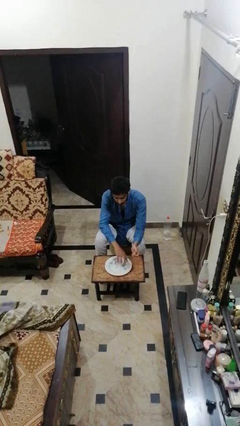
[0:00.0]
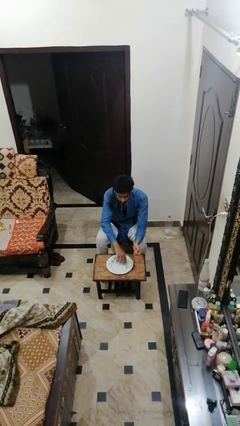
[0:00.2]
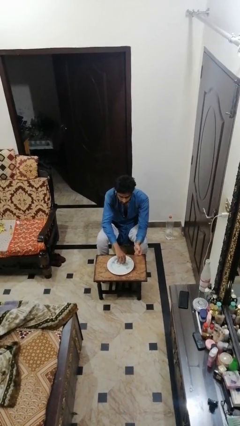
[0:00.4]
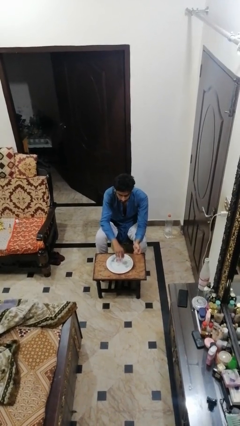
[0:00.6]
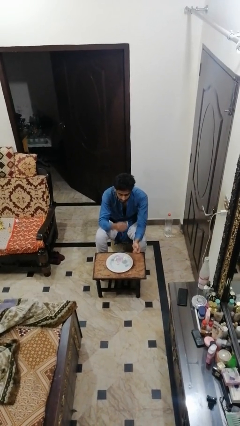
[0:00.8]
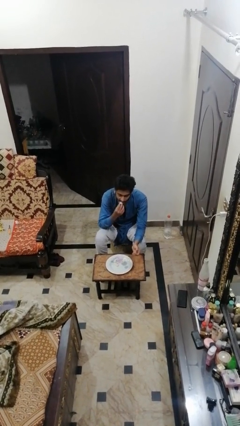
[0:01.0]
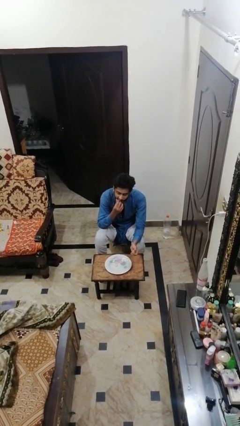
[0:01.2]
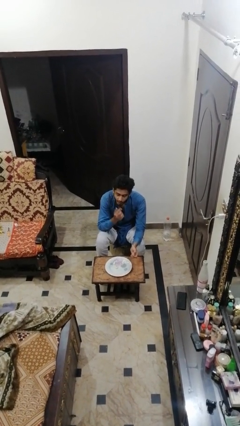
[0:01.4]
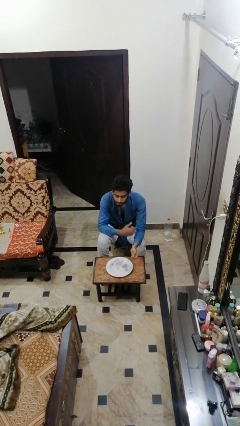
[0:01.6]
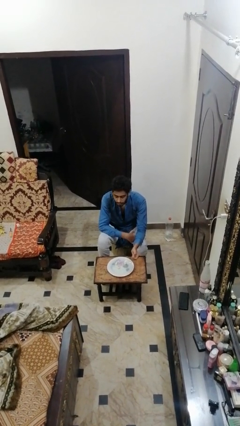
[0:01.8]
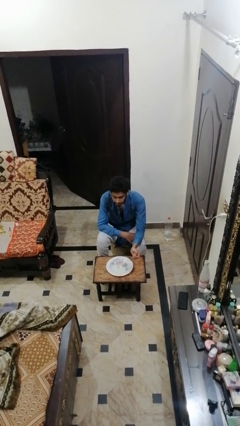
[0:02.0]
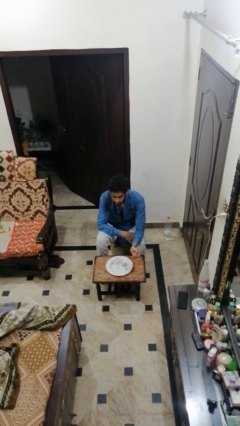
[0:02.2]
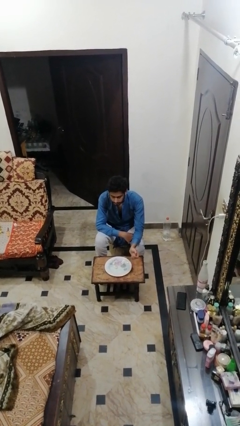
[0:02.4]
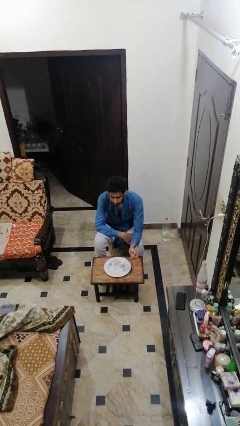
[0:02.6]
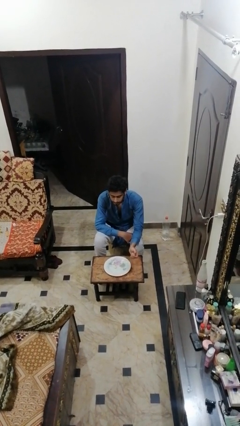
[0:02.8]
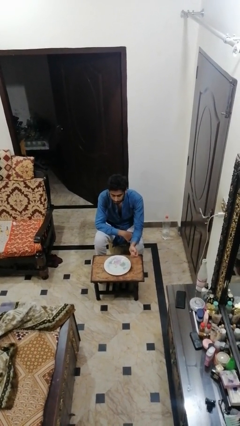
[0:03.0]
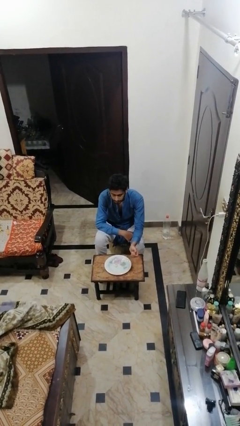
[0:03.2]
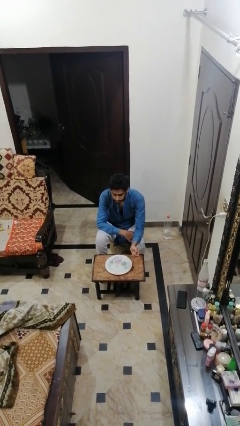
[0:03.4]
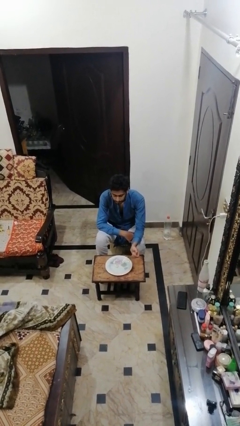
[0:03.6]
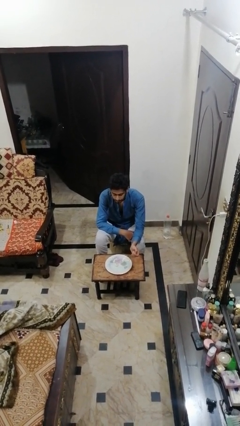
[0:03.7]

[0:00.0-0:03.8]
person eats with hands

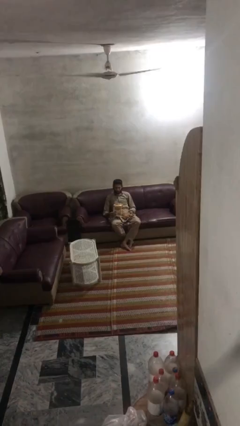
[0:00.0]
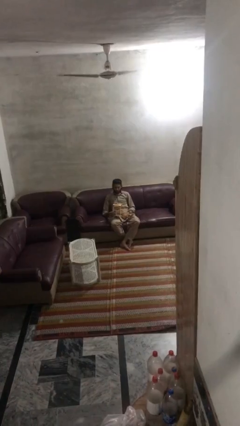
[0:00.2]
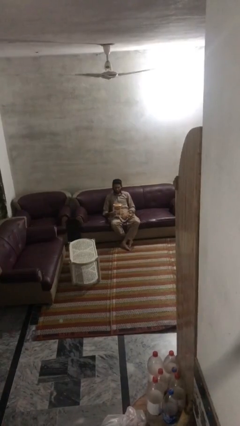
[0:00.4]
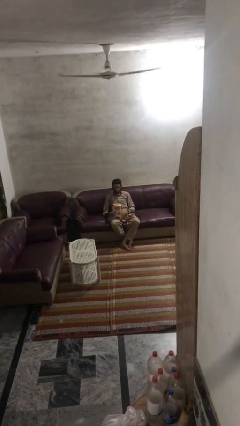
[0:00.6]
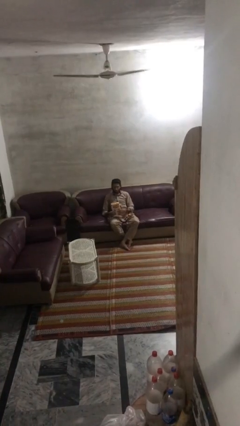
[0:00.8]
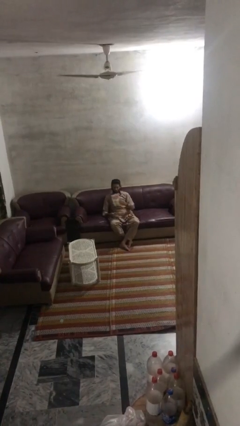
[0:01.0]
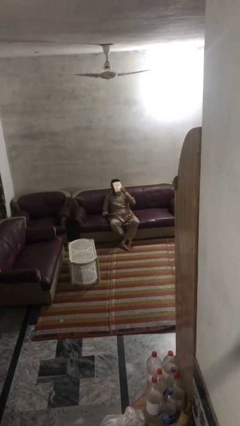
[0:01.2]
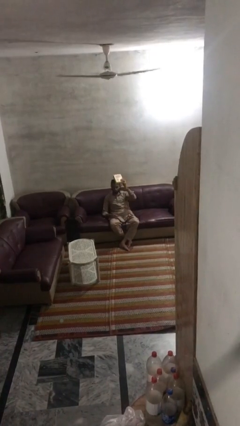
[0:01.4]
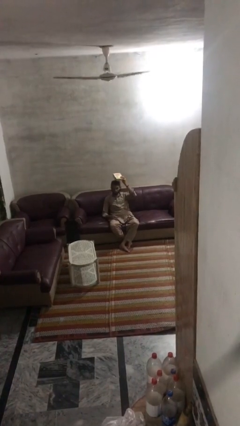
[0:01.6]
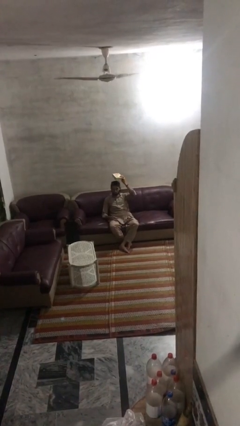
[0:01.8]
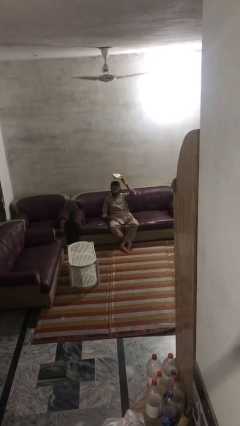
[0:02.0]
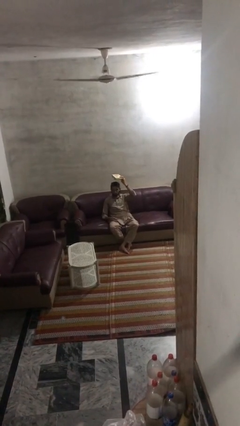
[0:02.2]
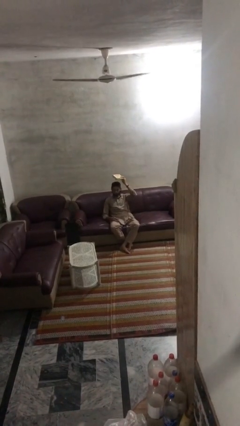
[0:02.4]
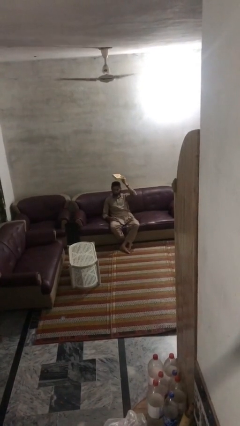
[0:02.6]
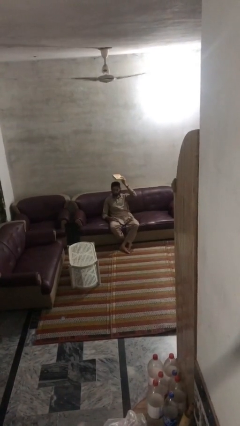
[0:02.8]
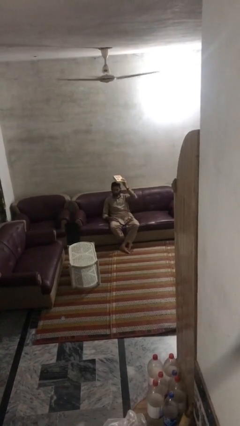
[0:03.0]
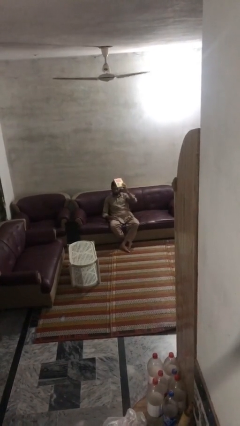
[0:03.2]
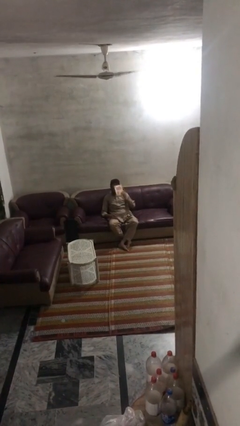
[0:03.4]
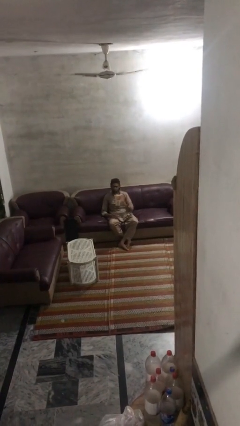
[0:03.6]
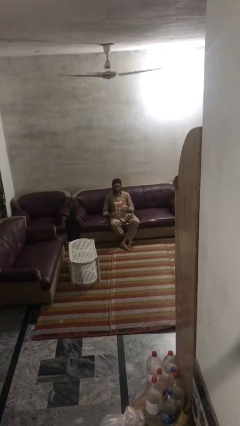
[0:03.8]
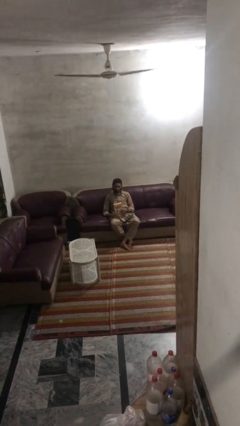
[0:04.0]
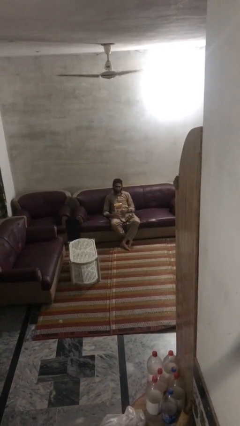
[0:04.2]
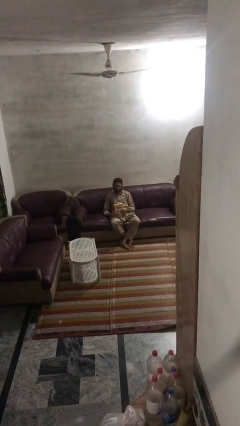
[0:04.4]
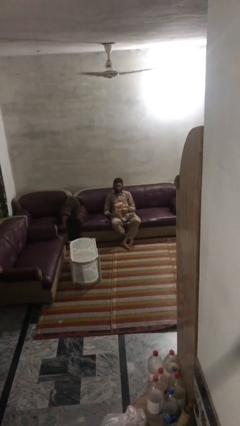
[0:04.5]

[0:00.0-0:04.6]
person holds object above head

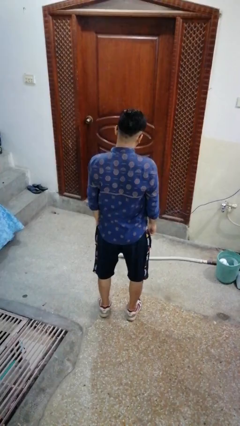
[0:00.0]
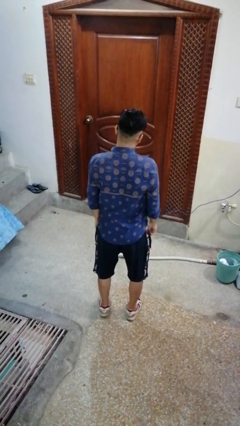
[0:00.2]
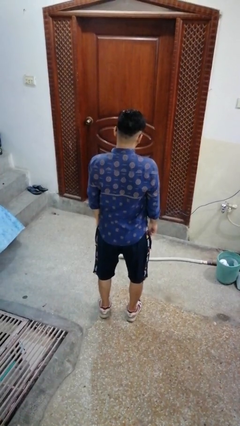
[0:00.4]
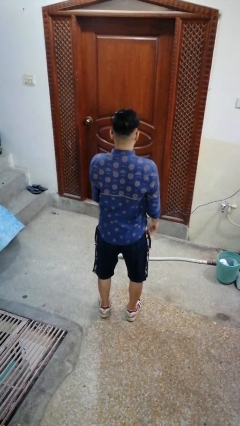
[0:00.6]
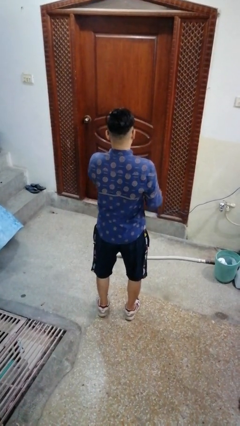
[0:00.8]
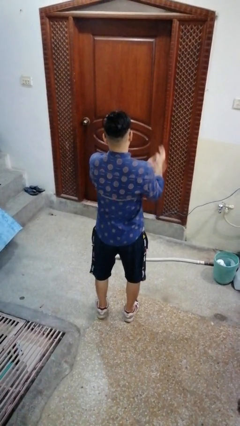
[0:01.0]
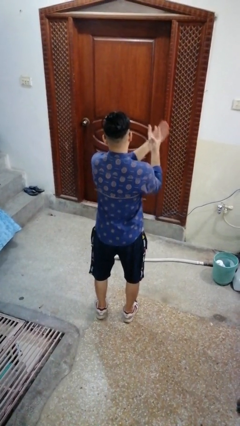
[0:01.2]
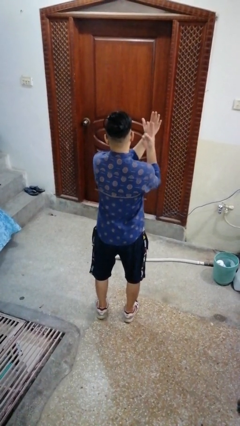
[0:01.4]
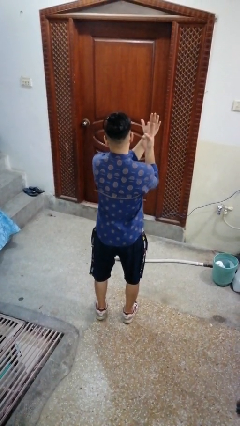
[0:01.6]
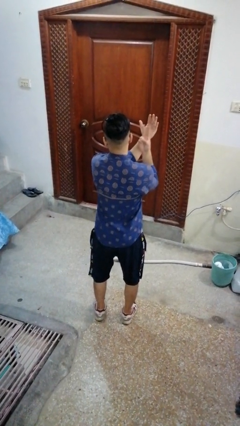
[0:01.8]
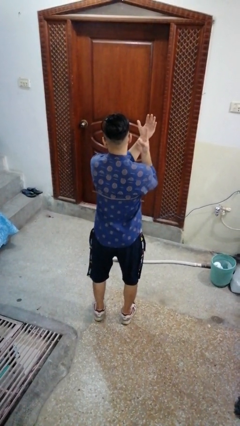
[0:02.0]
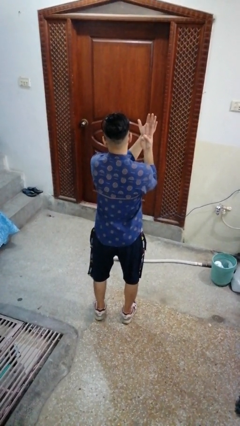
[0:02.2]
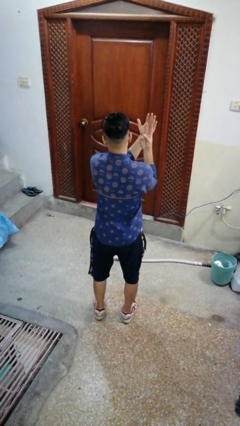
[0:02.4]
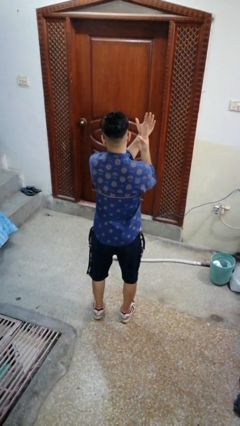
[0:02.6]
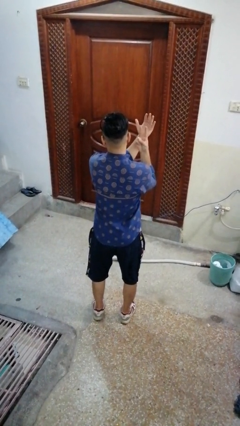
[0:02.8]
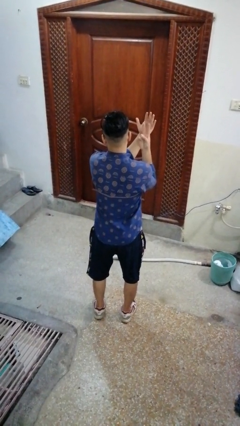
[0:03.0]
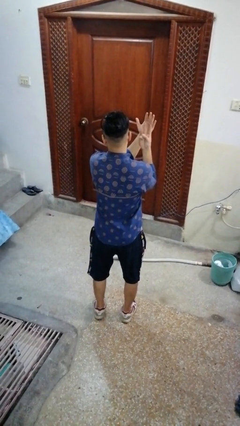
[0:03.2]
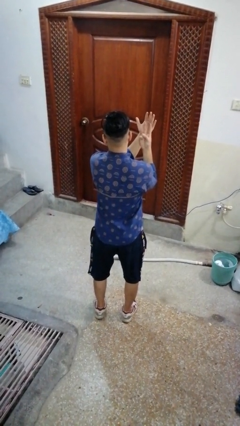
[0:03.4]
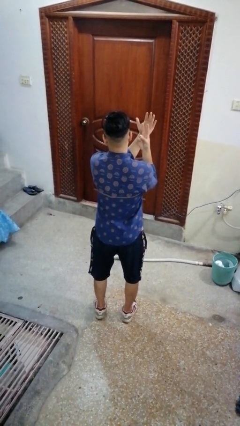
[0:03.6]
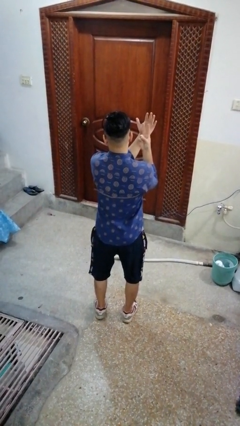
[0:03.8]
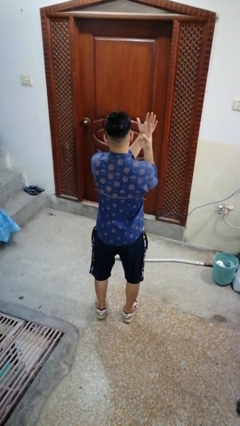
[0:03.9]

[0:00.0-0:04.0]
person gestures watch closely

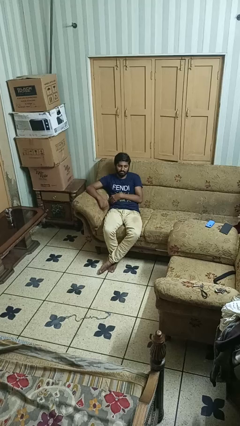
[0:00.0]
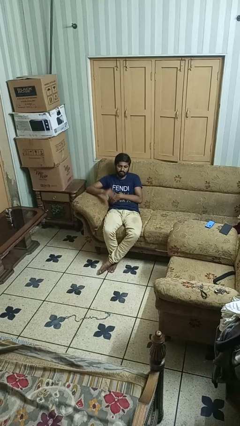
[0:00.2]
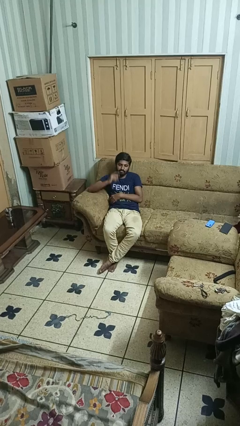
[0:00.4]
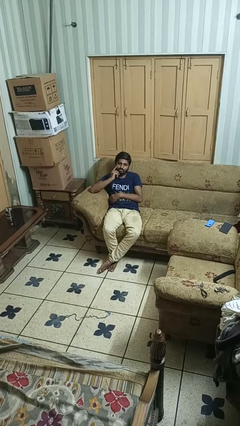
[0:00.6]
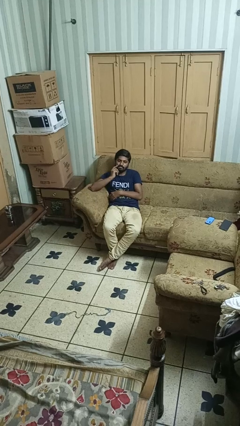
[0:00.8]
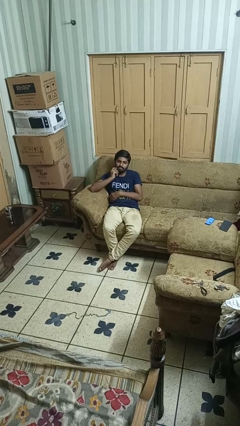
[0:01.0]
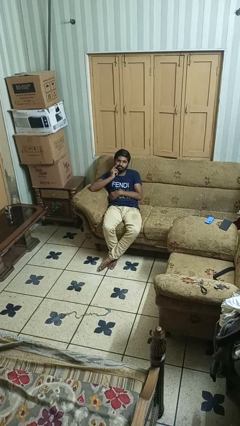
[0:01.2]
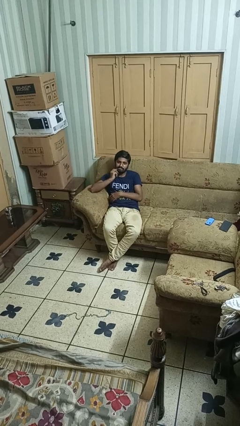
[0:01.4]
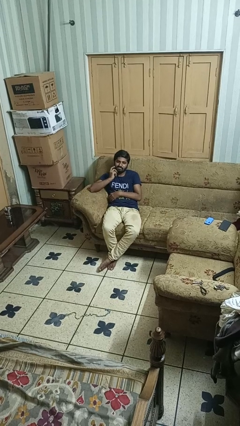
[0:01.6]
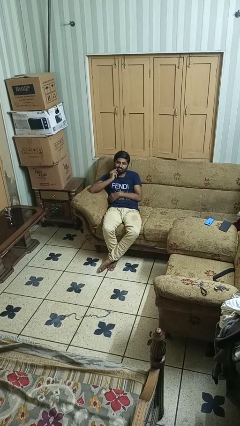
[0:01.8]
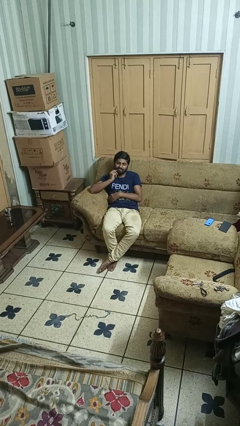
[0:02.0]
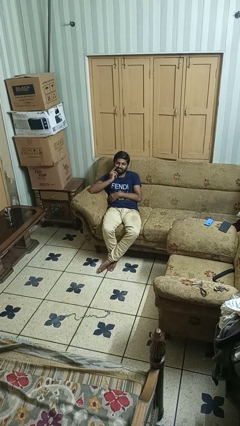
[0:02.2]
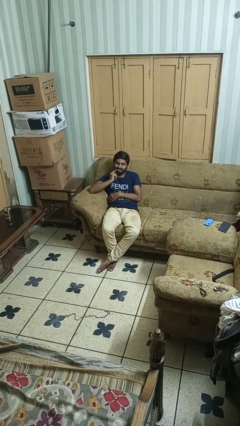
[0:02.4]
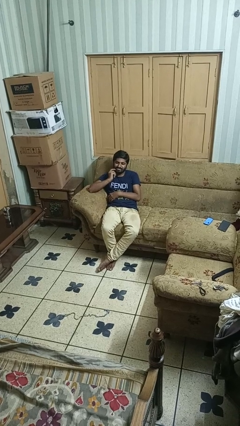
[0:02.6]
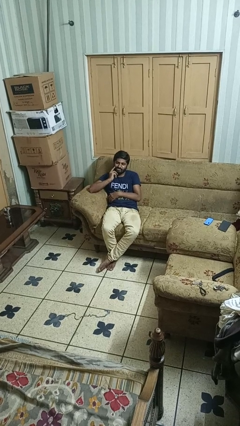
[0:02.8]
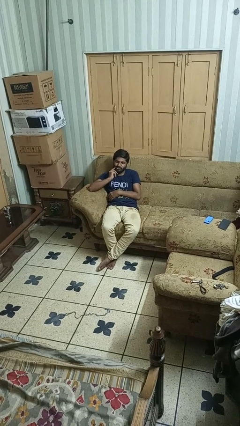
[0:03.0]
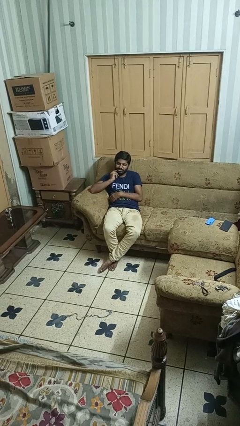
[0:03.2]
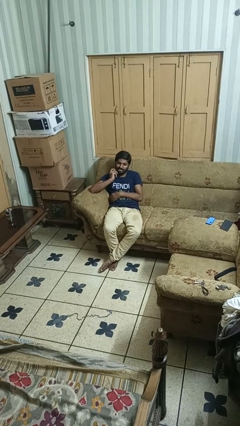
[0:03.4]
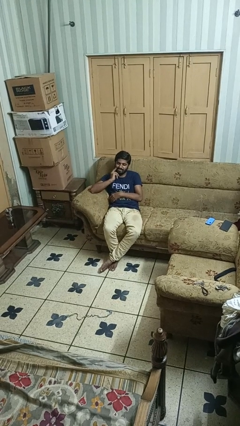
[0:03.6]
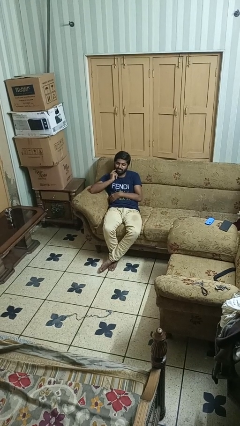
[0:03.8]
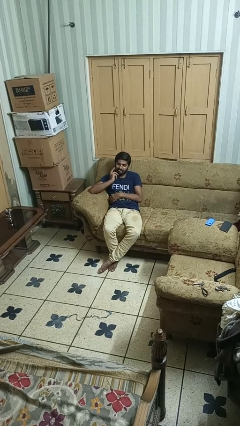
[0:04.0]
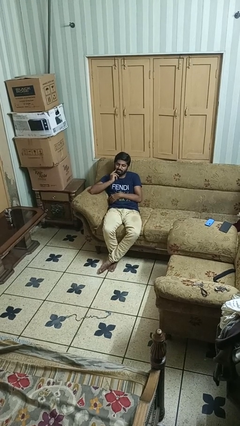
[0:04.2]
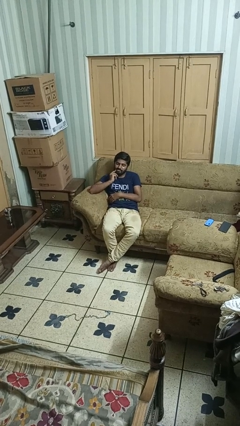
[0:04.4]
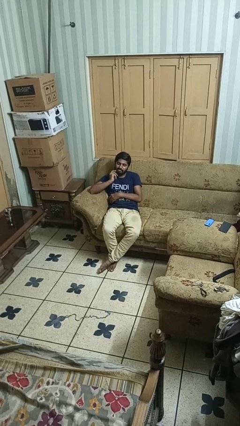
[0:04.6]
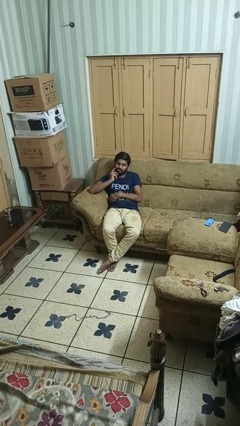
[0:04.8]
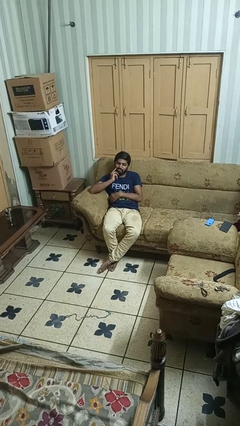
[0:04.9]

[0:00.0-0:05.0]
person strokes chin

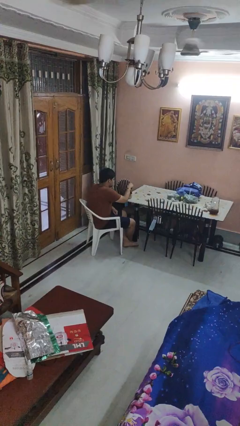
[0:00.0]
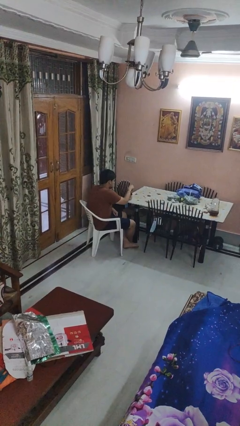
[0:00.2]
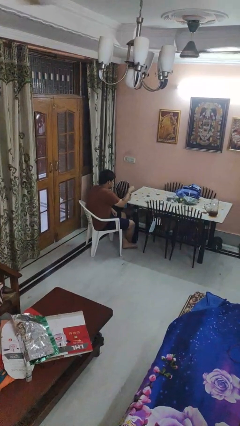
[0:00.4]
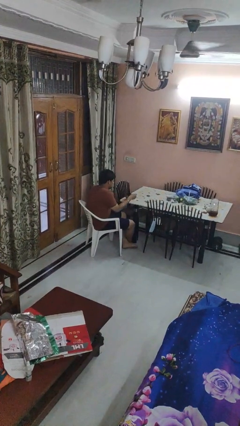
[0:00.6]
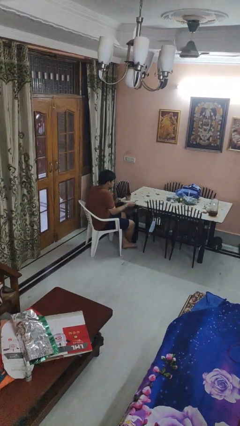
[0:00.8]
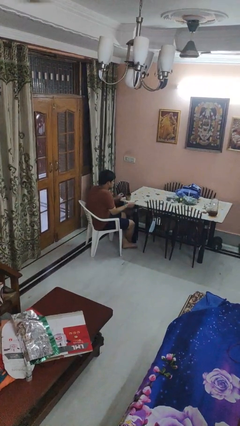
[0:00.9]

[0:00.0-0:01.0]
person stirs mug
